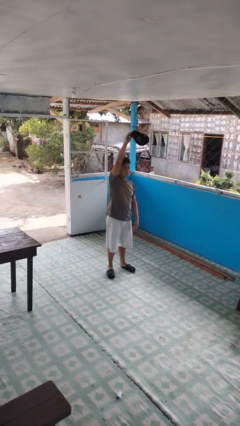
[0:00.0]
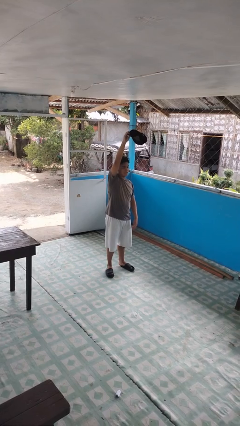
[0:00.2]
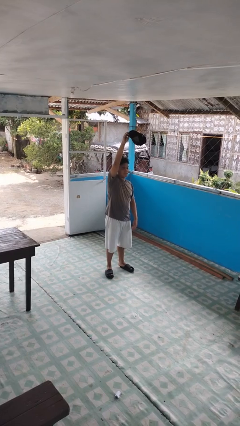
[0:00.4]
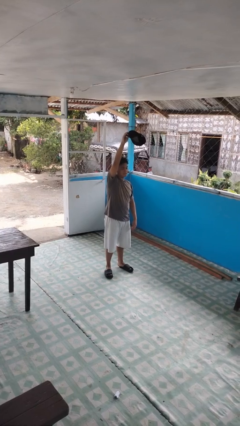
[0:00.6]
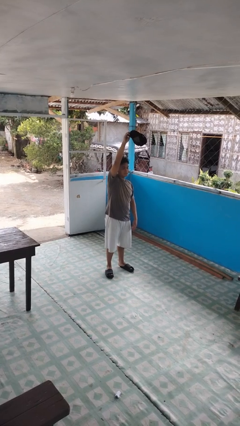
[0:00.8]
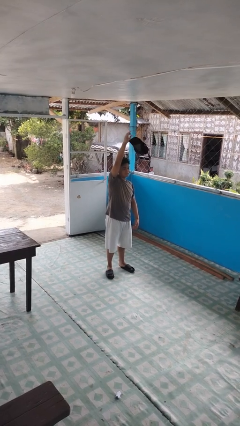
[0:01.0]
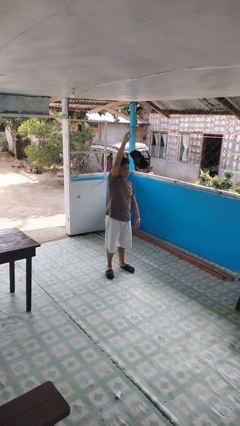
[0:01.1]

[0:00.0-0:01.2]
person drops object

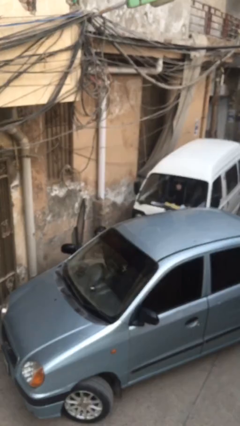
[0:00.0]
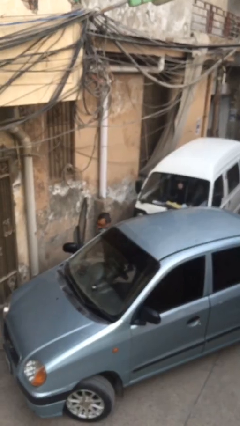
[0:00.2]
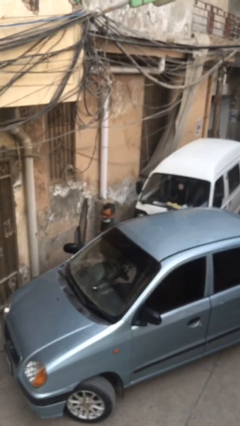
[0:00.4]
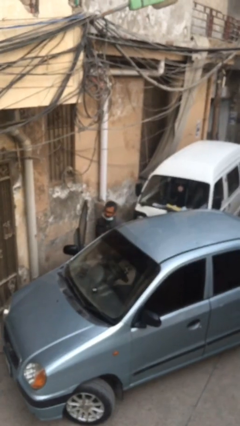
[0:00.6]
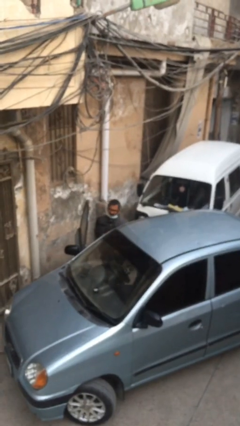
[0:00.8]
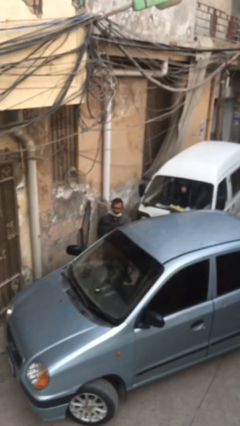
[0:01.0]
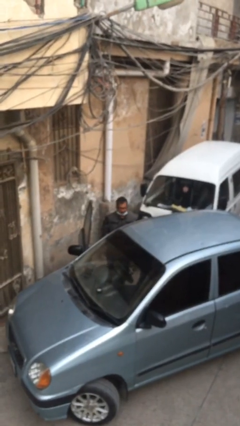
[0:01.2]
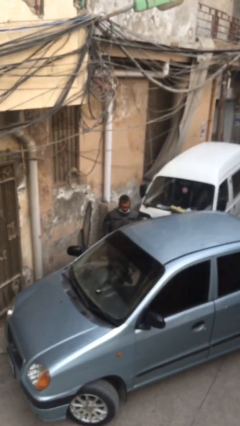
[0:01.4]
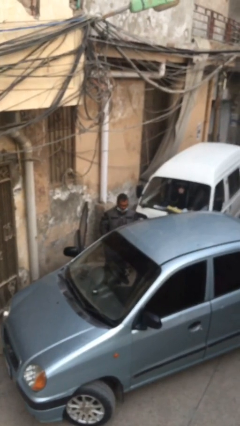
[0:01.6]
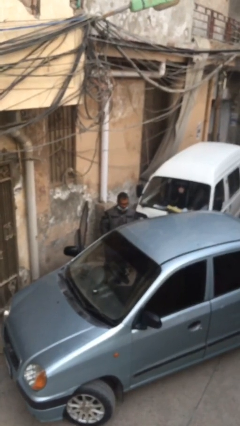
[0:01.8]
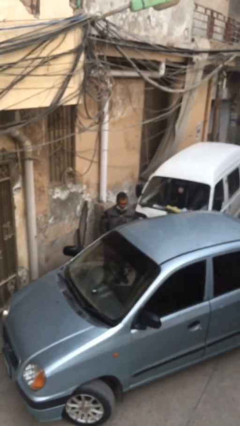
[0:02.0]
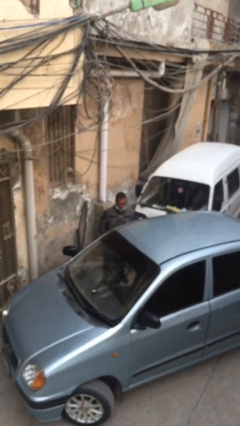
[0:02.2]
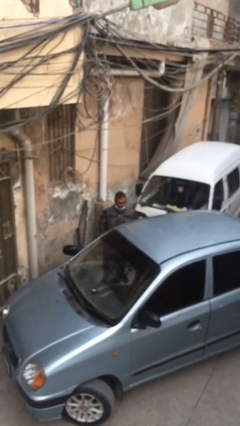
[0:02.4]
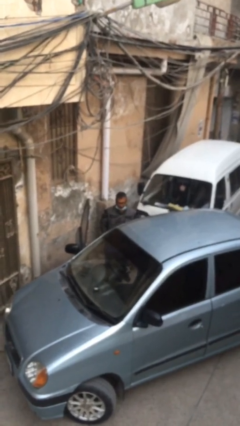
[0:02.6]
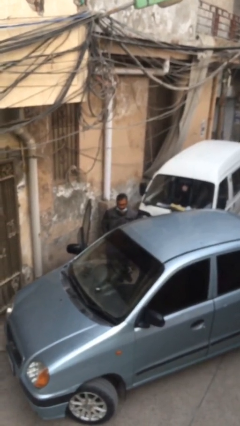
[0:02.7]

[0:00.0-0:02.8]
person exits car

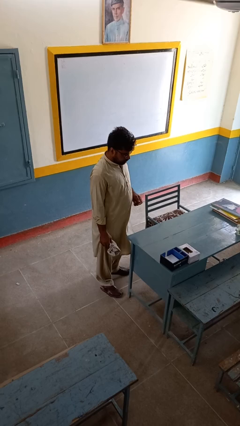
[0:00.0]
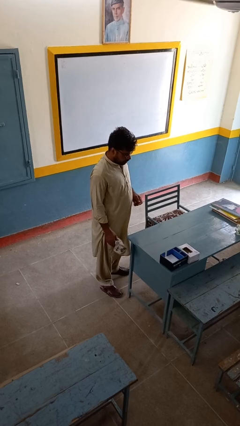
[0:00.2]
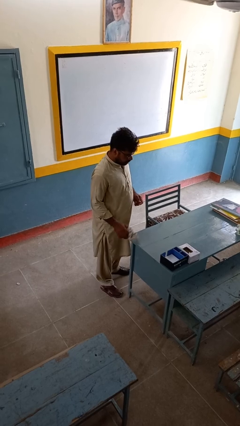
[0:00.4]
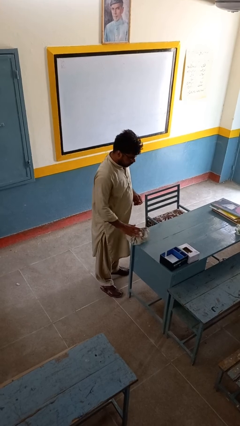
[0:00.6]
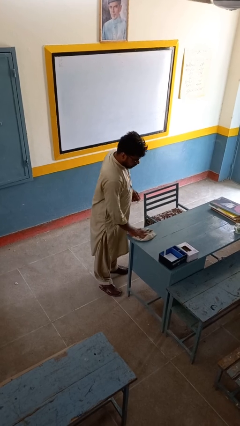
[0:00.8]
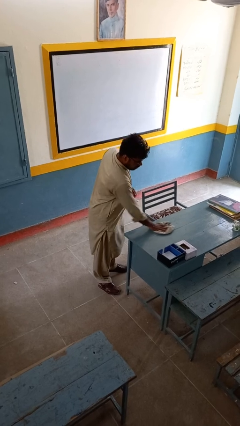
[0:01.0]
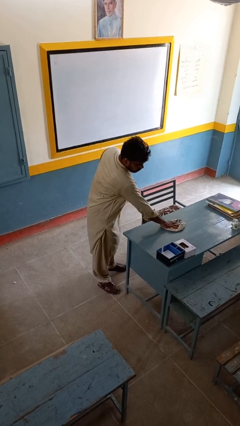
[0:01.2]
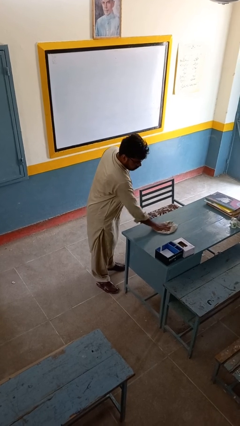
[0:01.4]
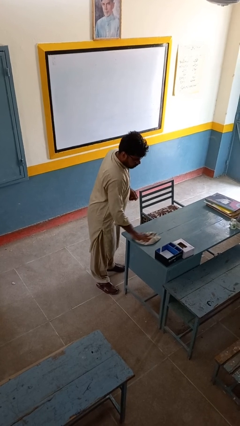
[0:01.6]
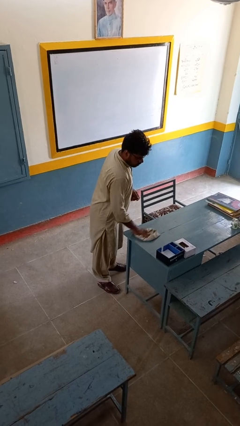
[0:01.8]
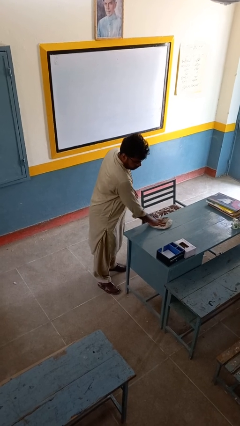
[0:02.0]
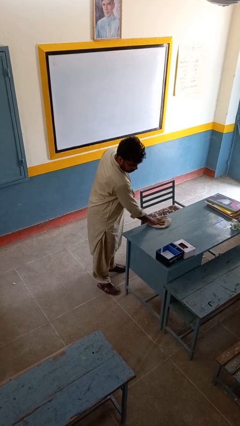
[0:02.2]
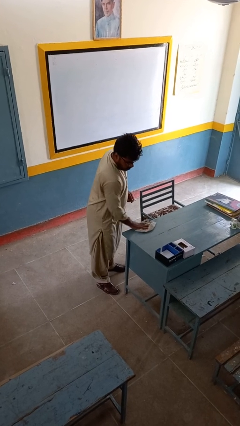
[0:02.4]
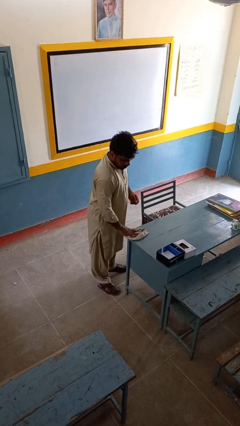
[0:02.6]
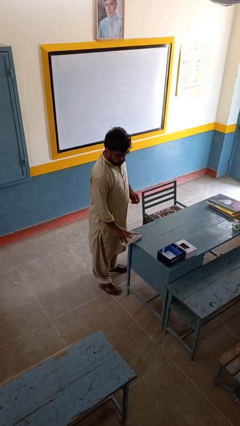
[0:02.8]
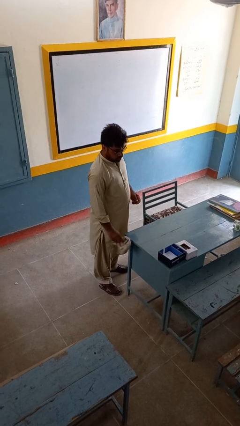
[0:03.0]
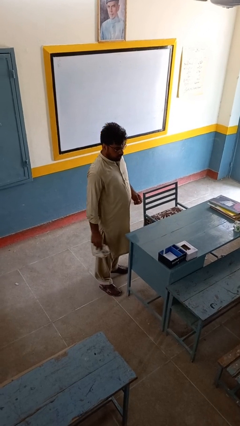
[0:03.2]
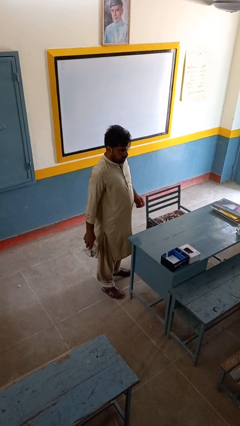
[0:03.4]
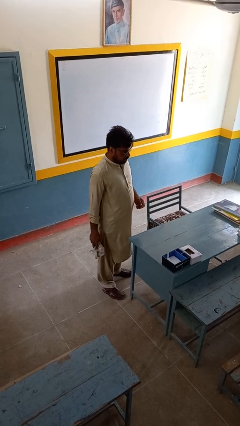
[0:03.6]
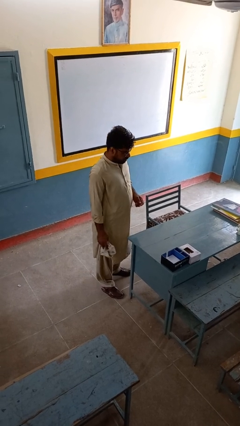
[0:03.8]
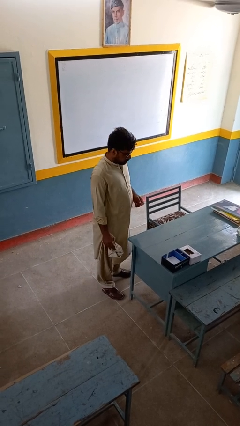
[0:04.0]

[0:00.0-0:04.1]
person cleans table with rag

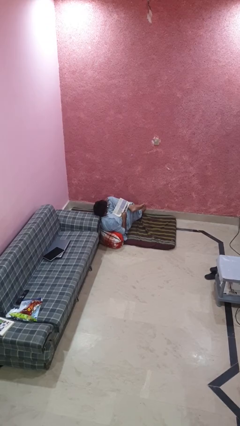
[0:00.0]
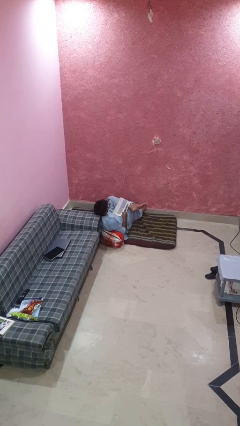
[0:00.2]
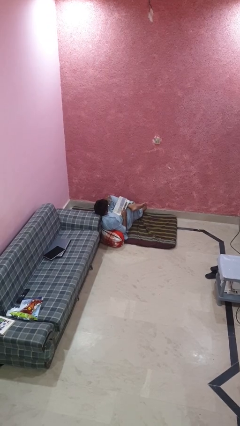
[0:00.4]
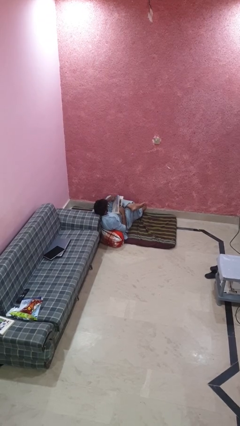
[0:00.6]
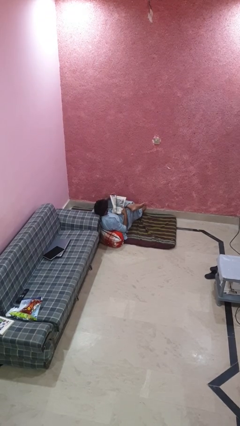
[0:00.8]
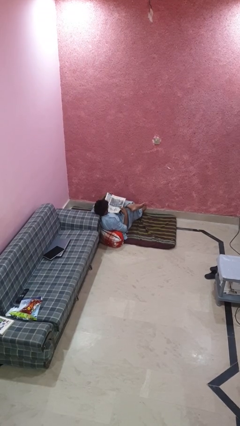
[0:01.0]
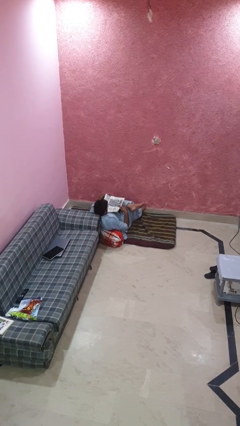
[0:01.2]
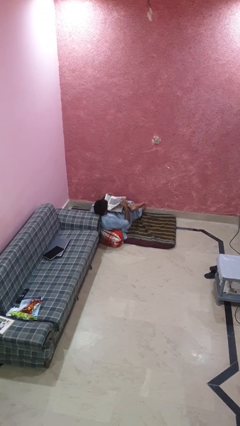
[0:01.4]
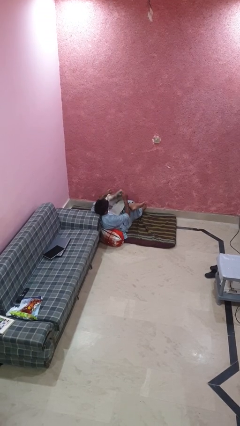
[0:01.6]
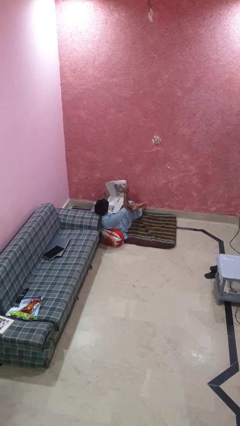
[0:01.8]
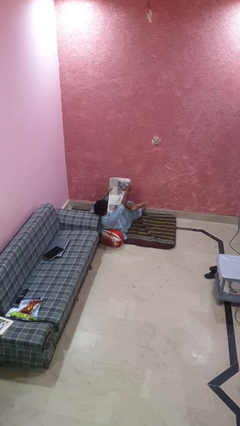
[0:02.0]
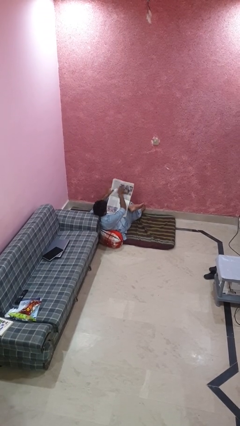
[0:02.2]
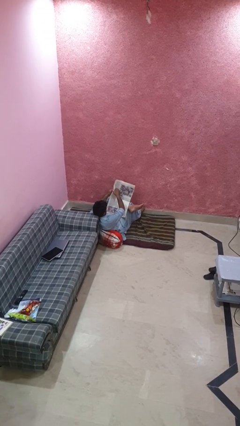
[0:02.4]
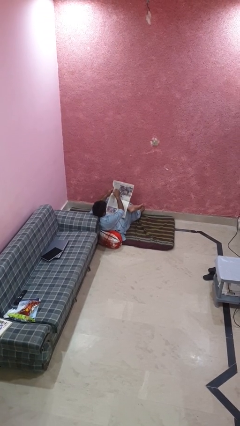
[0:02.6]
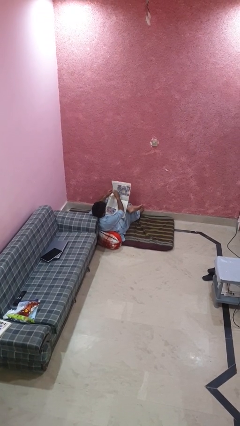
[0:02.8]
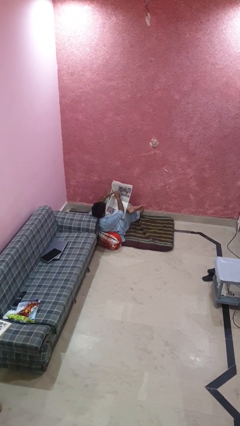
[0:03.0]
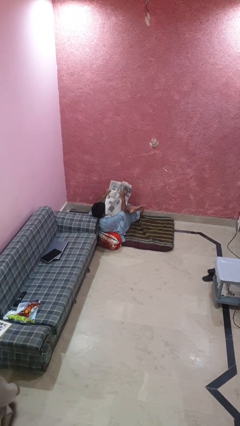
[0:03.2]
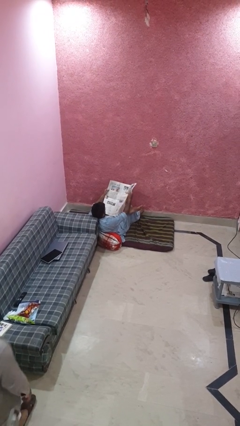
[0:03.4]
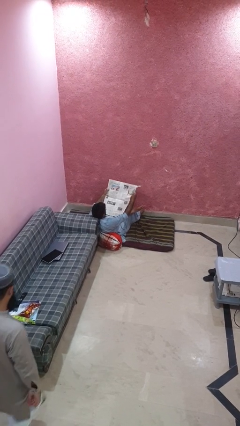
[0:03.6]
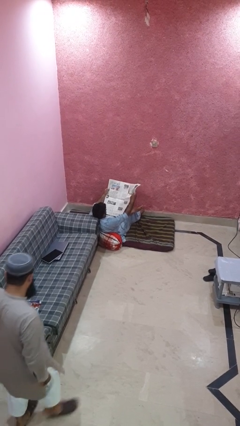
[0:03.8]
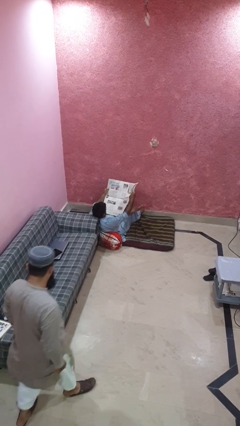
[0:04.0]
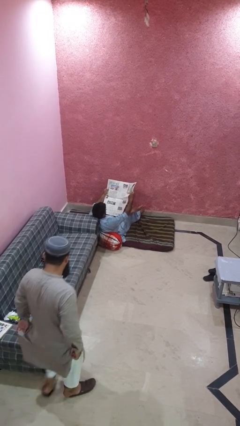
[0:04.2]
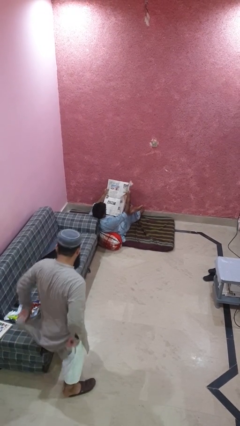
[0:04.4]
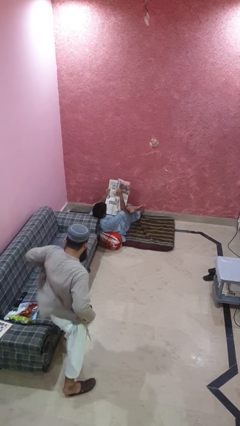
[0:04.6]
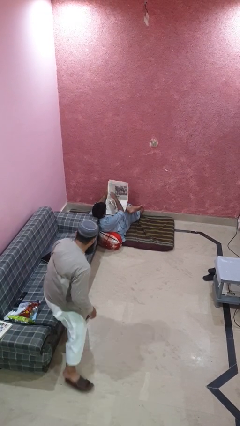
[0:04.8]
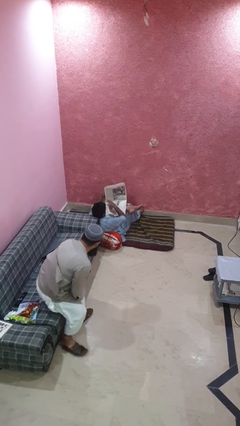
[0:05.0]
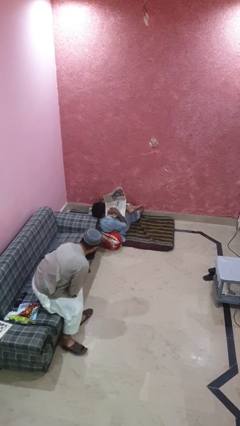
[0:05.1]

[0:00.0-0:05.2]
person reads newspaper

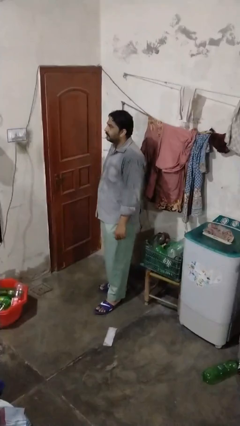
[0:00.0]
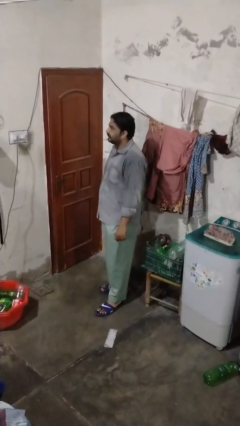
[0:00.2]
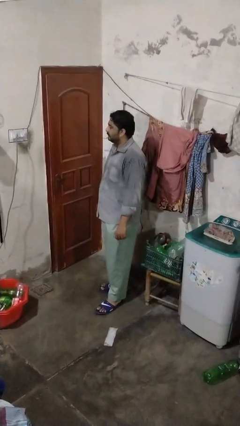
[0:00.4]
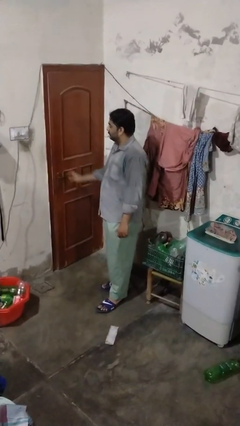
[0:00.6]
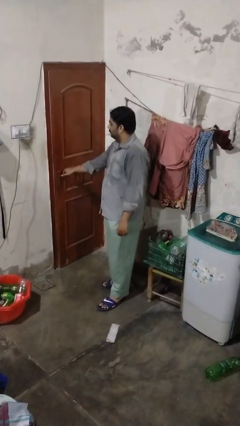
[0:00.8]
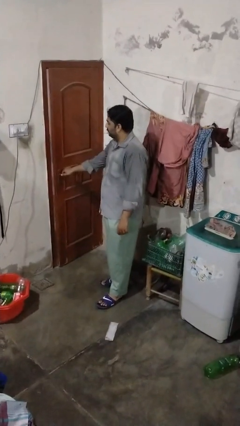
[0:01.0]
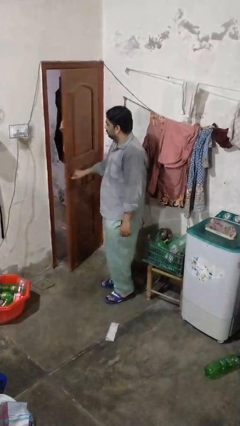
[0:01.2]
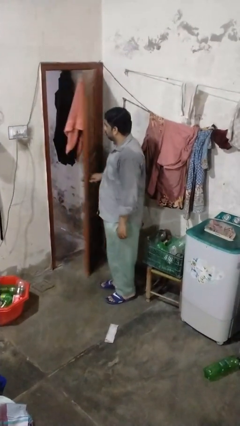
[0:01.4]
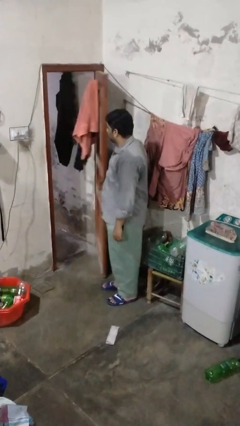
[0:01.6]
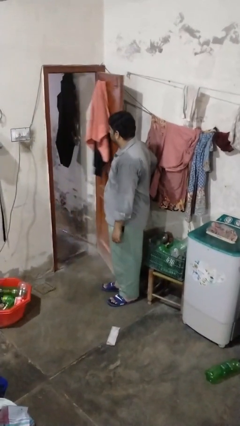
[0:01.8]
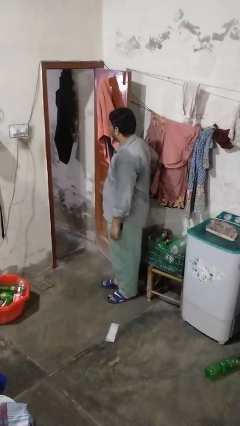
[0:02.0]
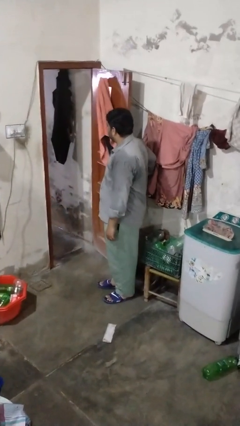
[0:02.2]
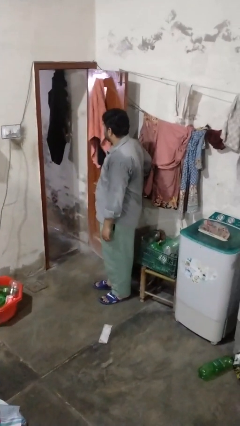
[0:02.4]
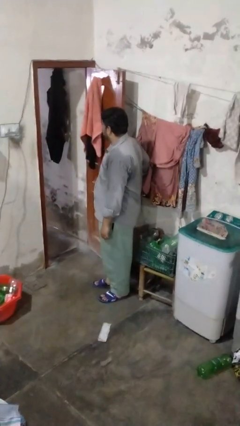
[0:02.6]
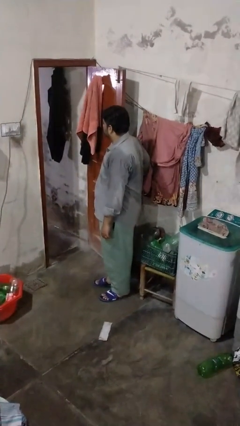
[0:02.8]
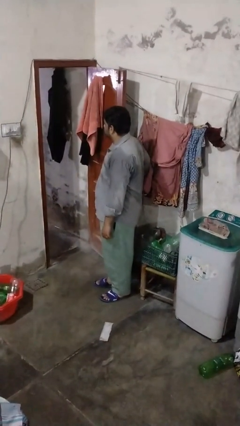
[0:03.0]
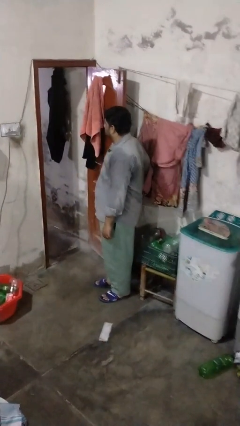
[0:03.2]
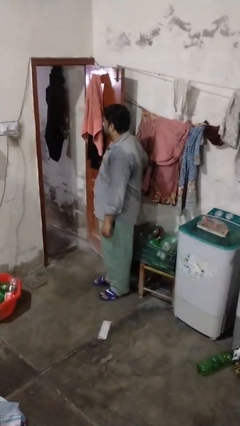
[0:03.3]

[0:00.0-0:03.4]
person opens closet door

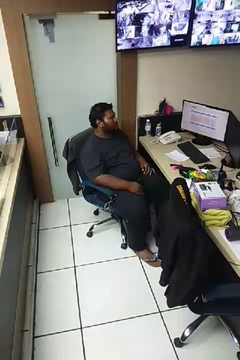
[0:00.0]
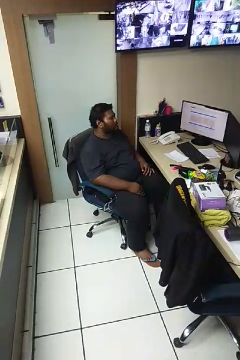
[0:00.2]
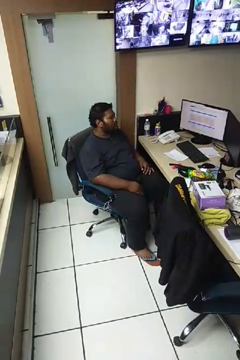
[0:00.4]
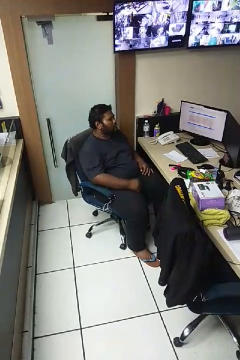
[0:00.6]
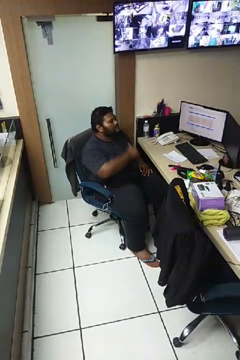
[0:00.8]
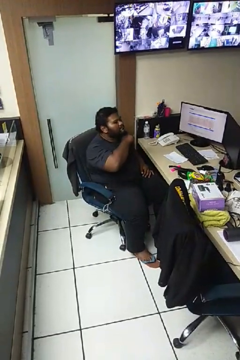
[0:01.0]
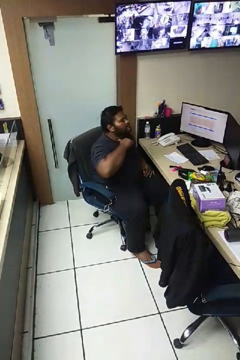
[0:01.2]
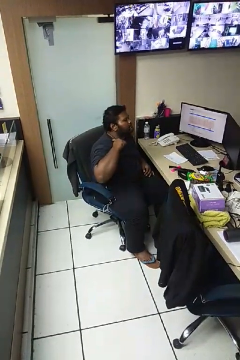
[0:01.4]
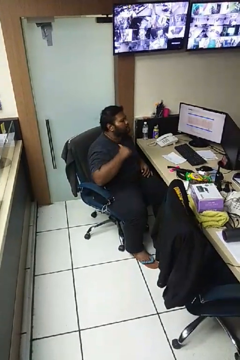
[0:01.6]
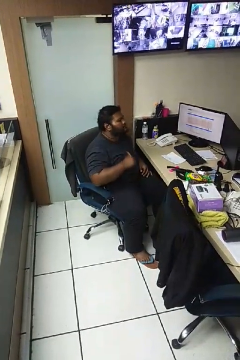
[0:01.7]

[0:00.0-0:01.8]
person gestures cut
